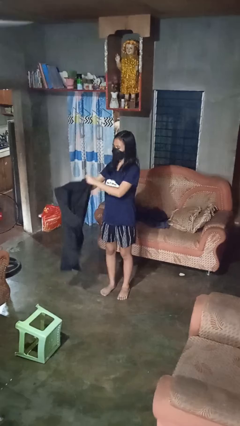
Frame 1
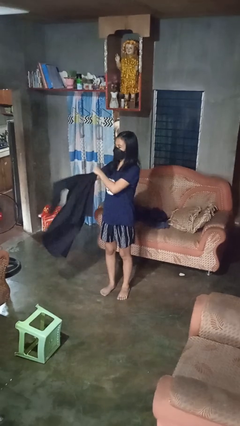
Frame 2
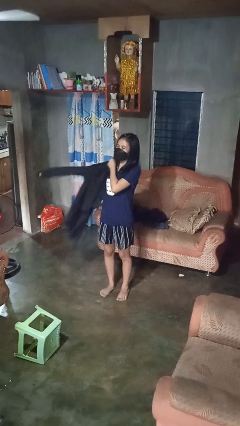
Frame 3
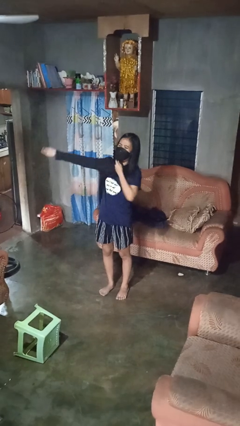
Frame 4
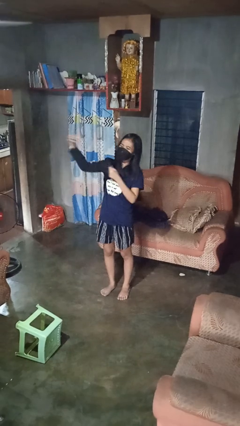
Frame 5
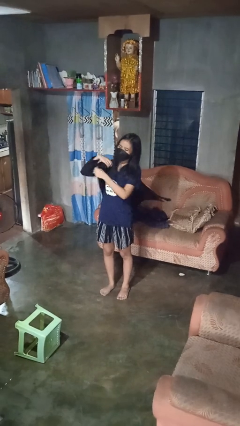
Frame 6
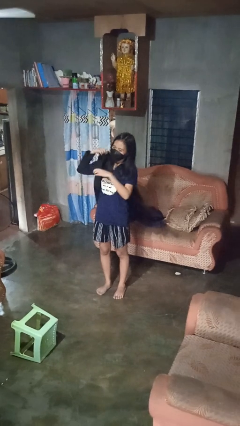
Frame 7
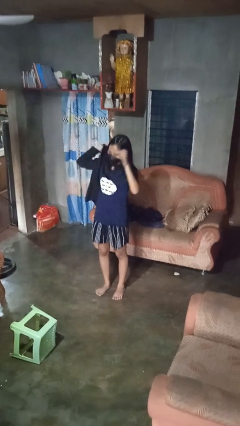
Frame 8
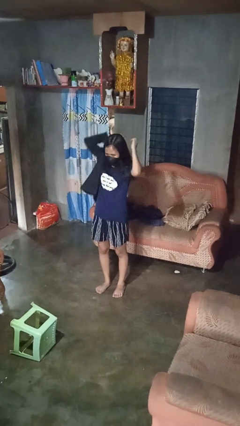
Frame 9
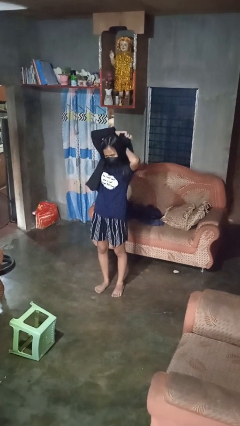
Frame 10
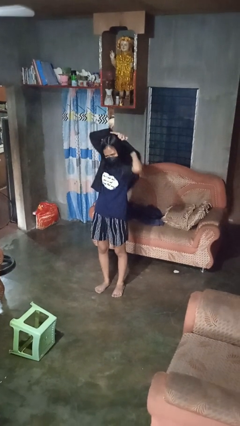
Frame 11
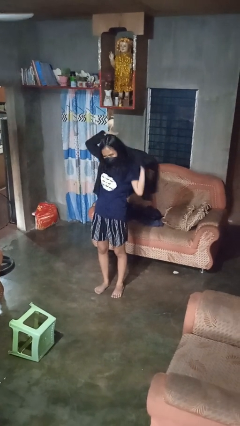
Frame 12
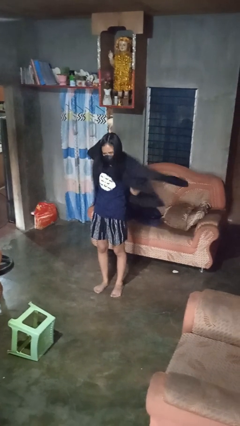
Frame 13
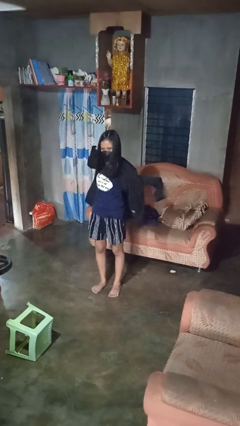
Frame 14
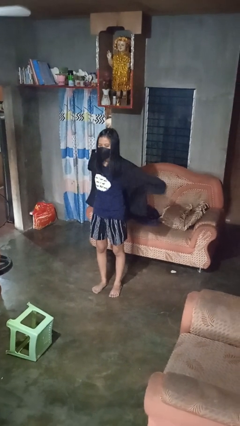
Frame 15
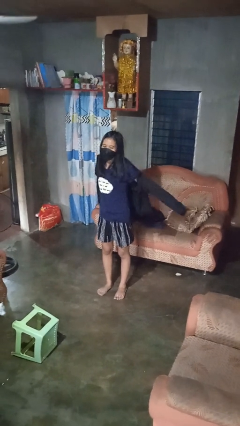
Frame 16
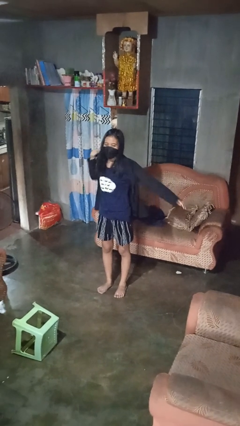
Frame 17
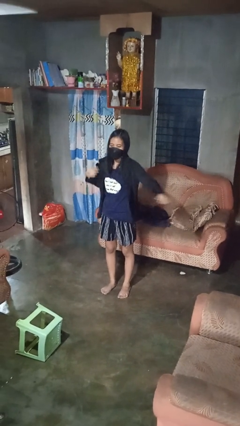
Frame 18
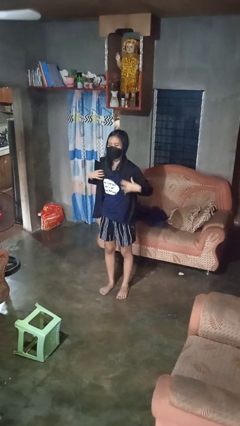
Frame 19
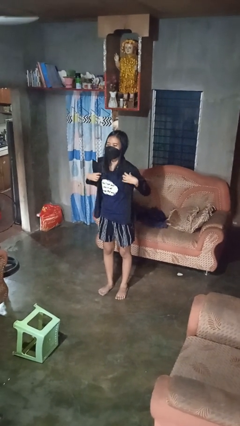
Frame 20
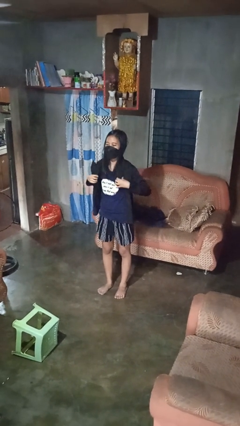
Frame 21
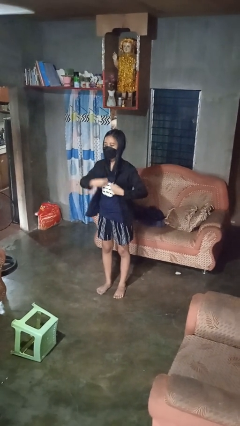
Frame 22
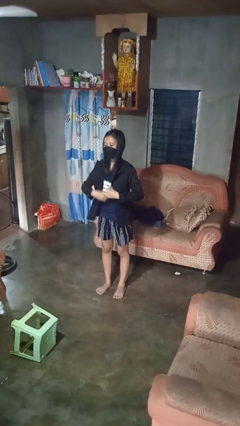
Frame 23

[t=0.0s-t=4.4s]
person puts on shirt

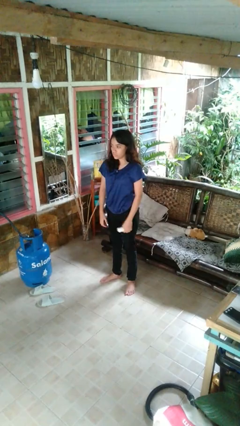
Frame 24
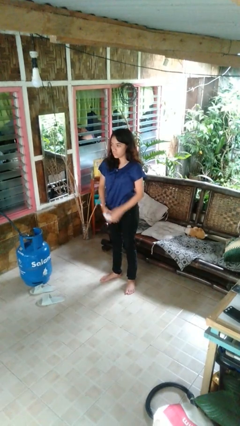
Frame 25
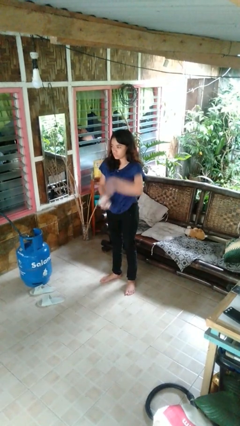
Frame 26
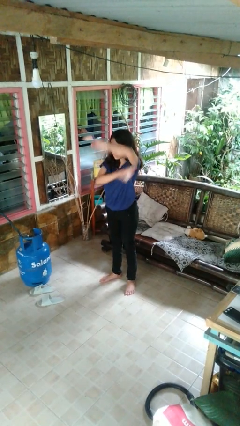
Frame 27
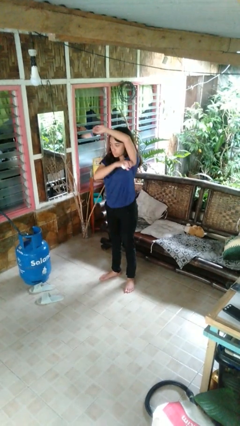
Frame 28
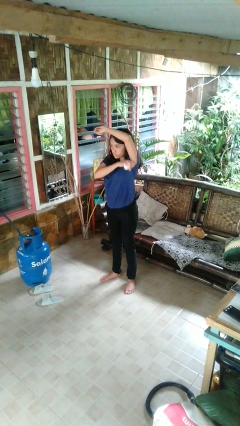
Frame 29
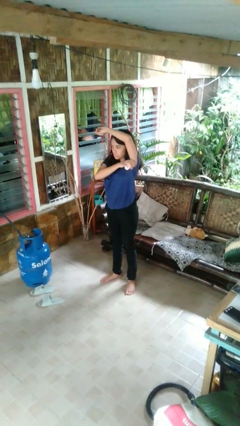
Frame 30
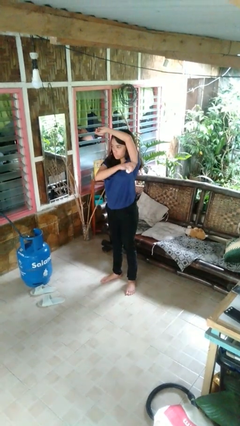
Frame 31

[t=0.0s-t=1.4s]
person applies deodorant

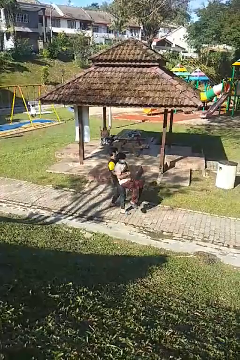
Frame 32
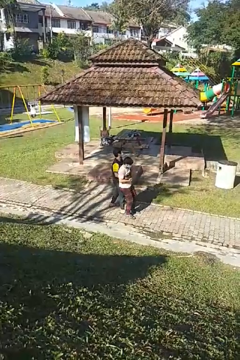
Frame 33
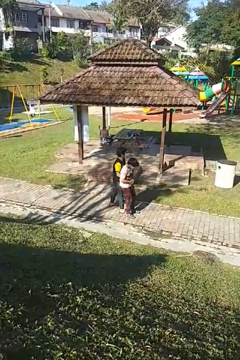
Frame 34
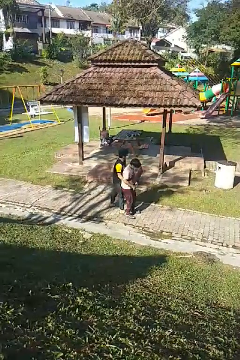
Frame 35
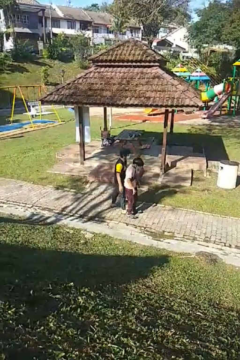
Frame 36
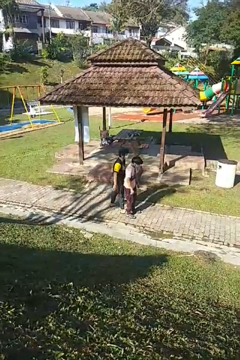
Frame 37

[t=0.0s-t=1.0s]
person puts down person

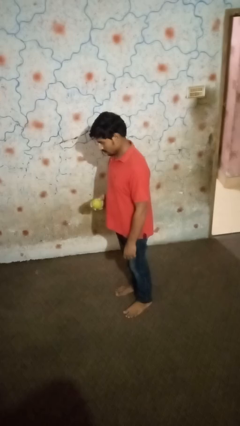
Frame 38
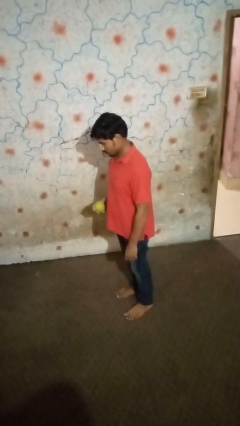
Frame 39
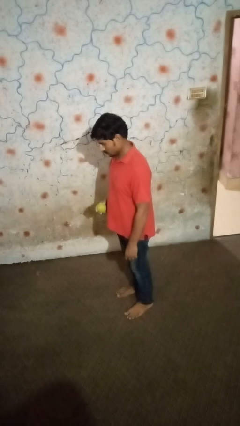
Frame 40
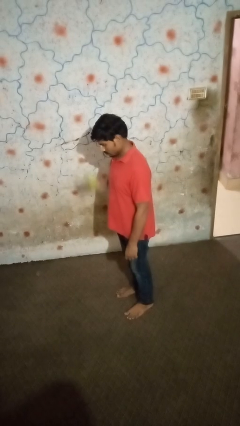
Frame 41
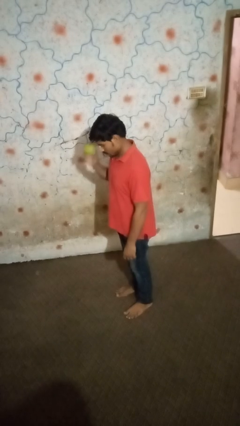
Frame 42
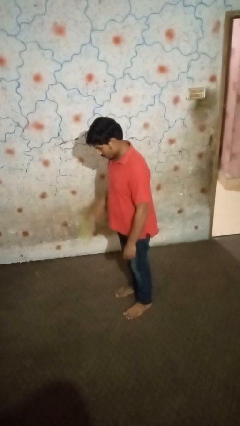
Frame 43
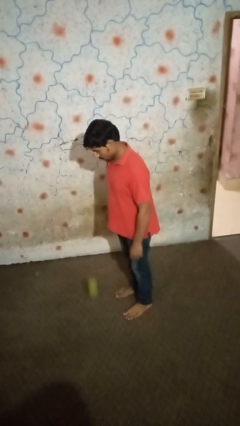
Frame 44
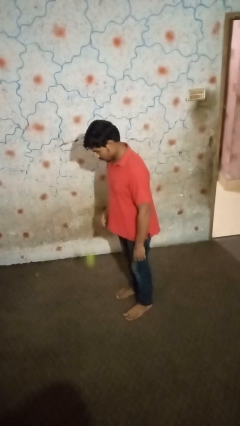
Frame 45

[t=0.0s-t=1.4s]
person bounces ball on floor

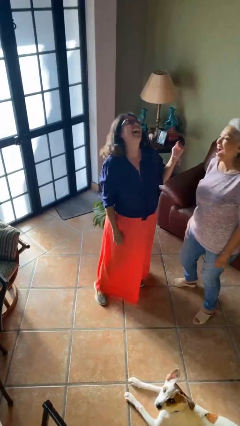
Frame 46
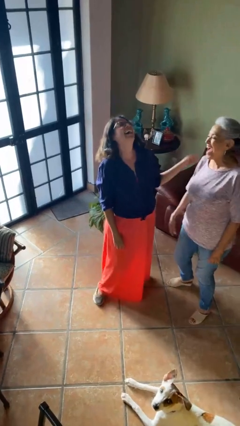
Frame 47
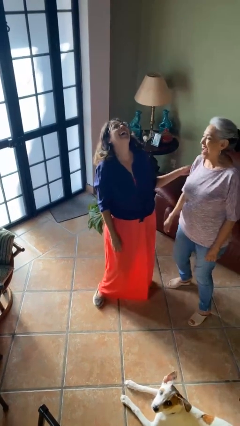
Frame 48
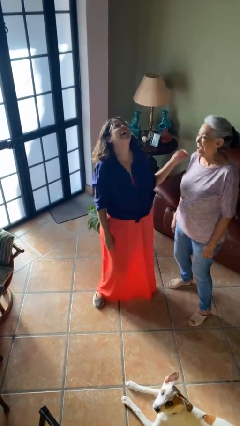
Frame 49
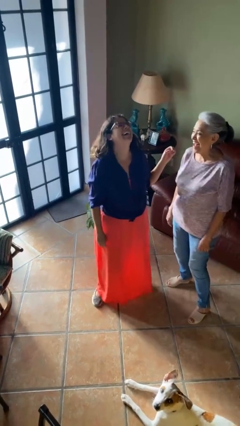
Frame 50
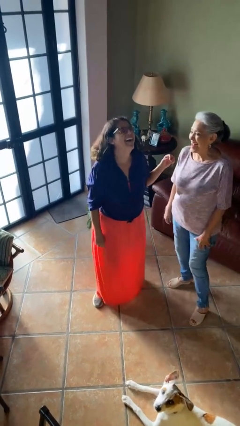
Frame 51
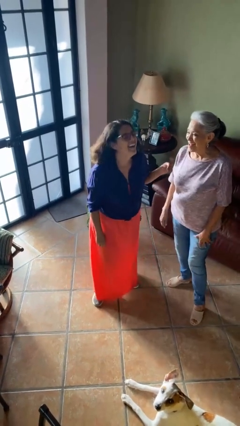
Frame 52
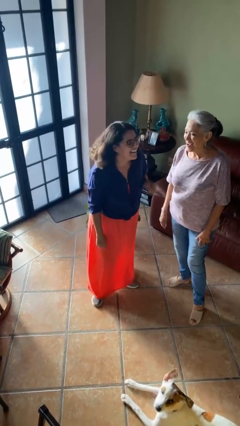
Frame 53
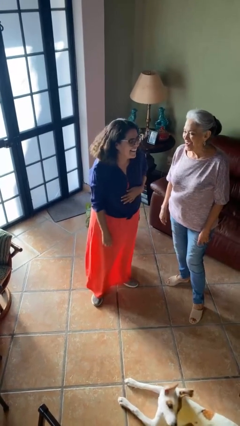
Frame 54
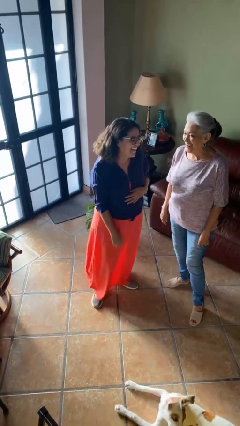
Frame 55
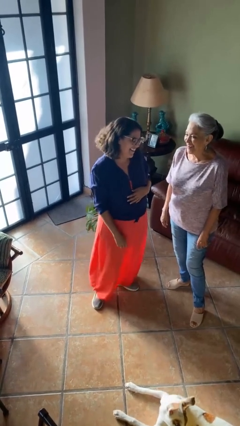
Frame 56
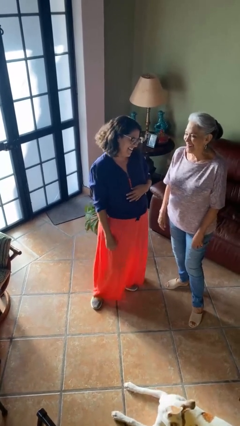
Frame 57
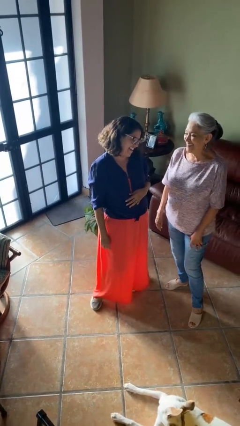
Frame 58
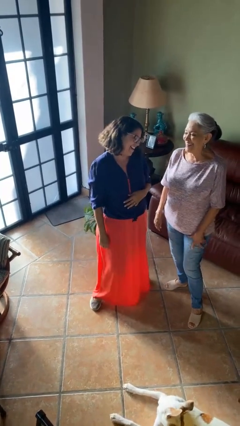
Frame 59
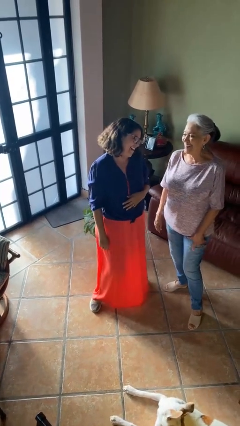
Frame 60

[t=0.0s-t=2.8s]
person laughs with person

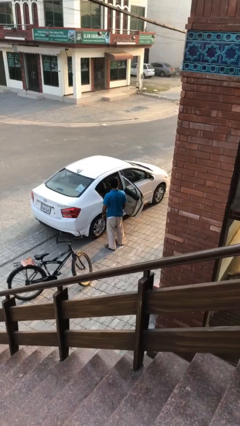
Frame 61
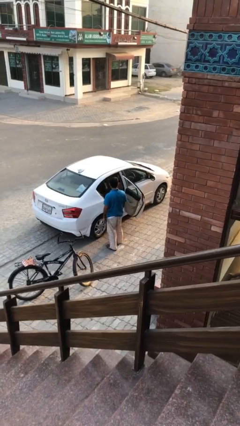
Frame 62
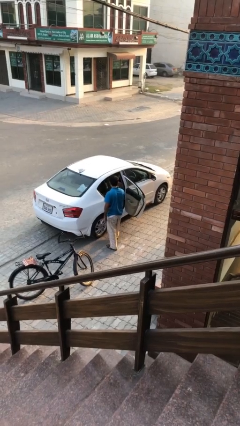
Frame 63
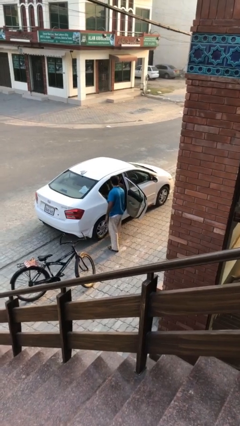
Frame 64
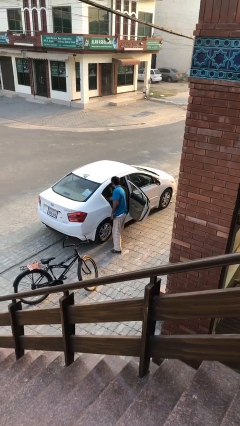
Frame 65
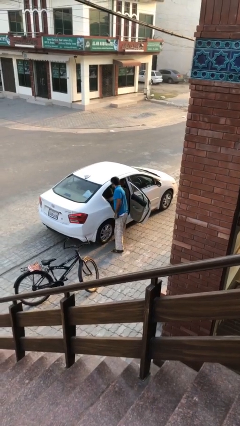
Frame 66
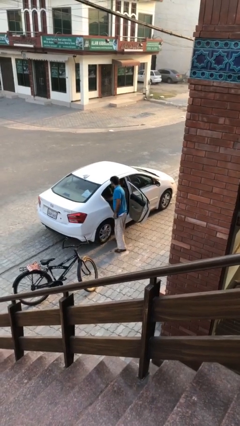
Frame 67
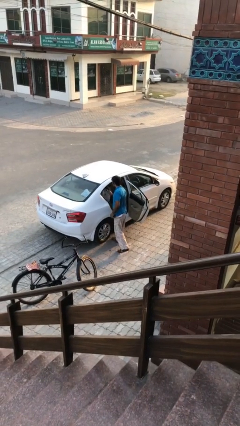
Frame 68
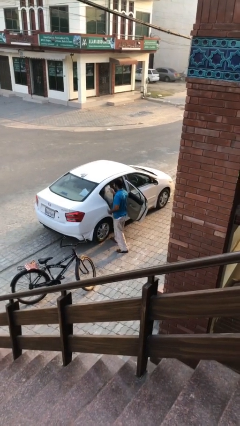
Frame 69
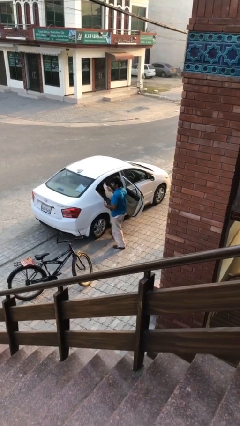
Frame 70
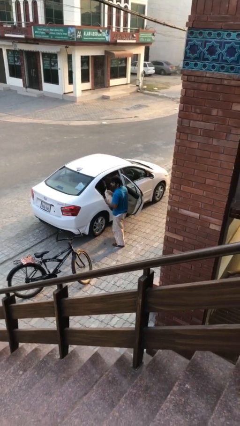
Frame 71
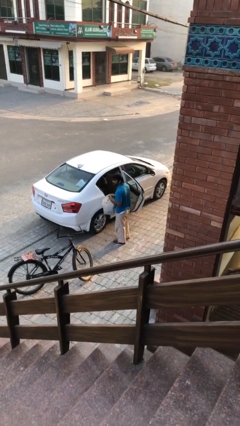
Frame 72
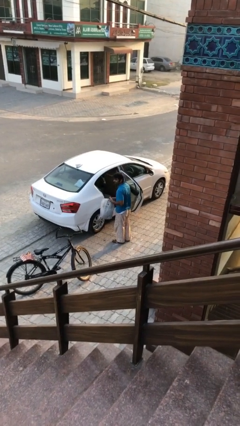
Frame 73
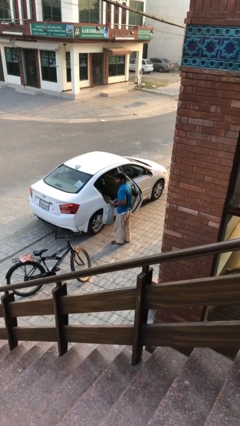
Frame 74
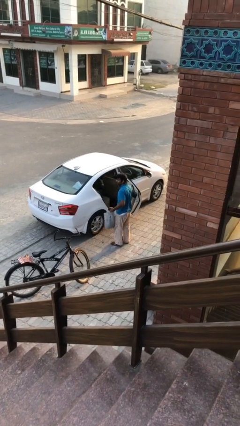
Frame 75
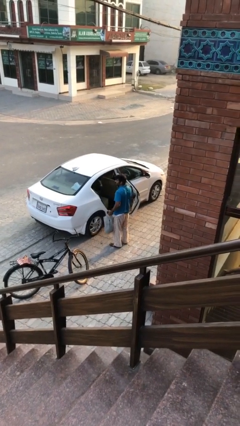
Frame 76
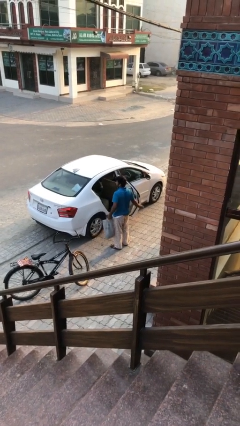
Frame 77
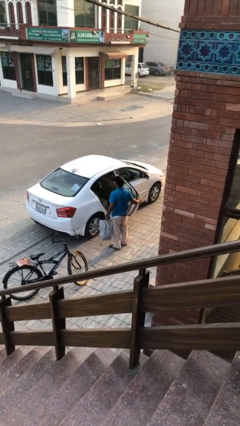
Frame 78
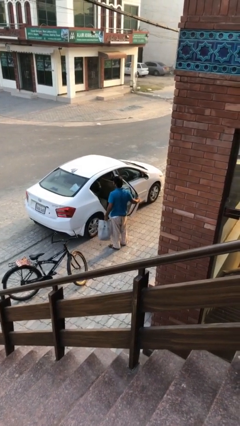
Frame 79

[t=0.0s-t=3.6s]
person unloads car

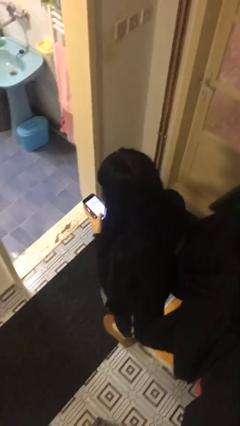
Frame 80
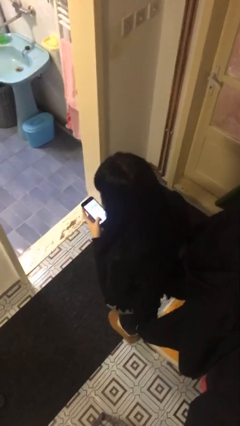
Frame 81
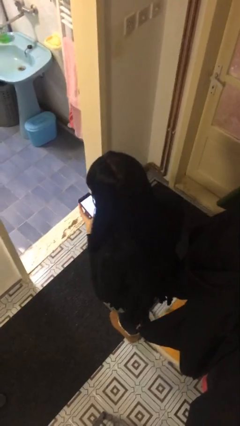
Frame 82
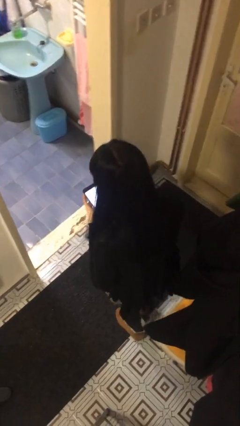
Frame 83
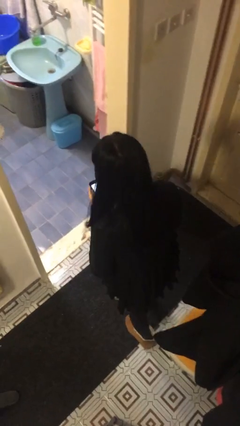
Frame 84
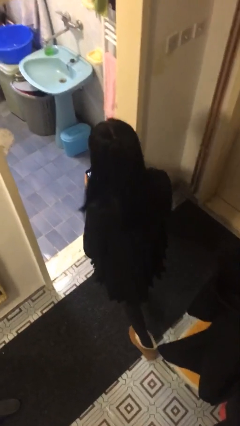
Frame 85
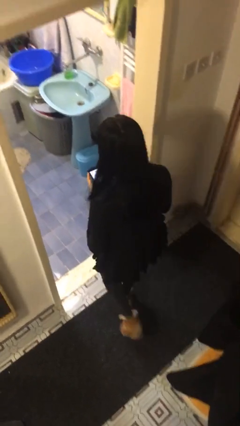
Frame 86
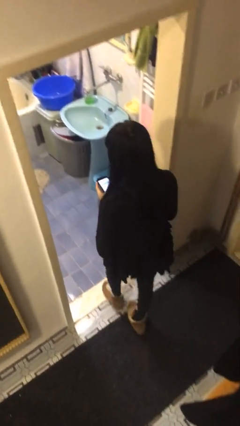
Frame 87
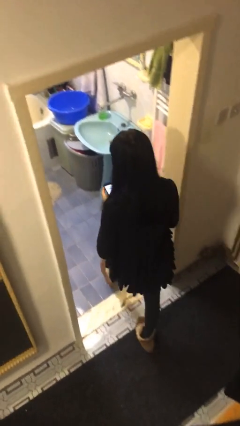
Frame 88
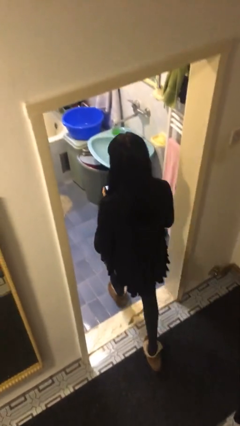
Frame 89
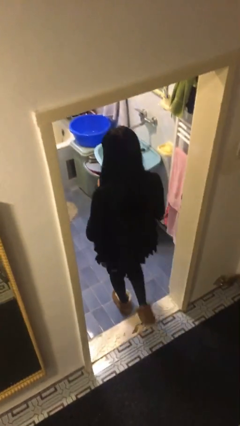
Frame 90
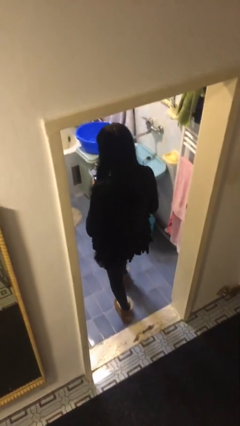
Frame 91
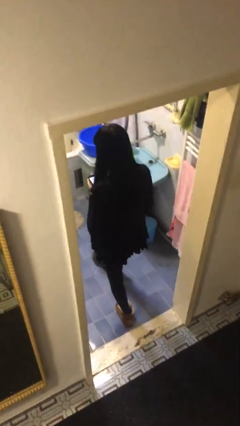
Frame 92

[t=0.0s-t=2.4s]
person exits scene through structure

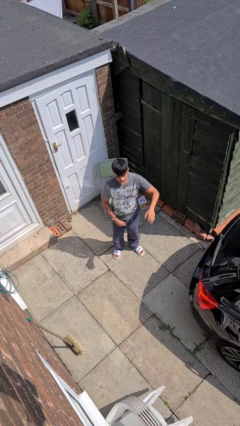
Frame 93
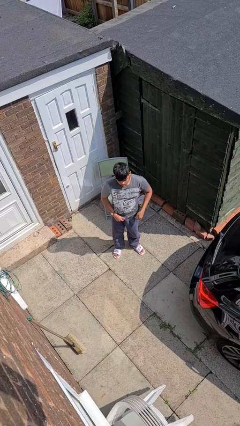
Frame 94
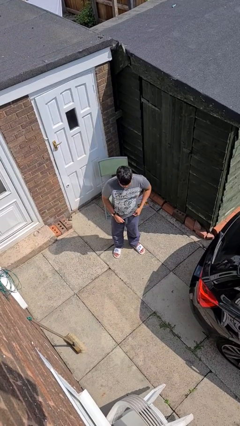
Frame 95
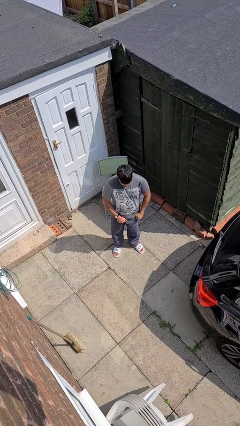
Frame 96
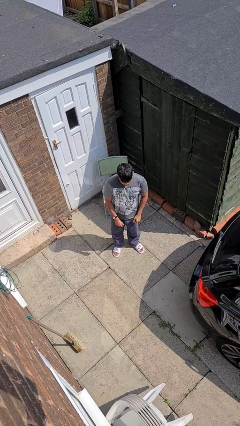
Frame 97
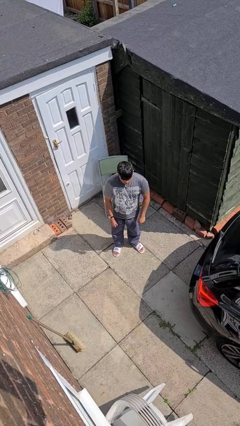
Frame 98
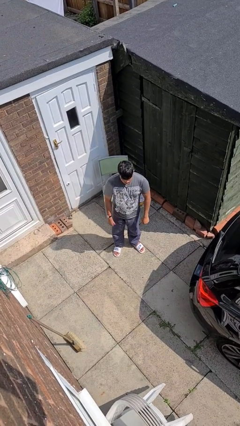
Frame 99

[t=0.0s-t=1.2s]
person gestures lower hand
